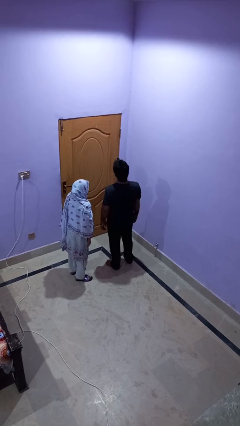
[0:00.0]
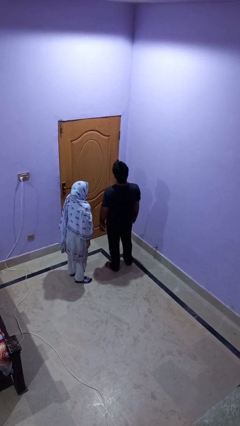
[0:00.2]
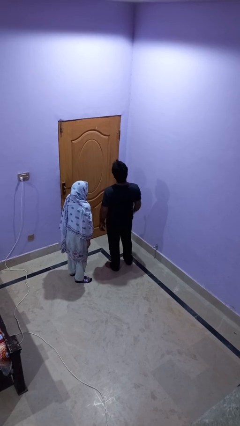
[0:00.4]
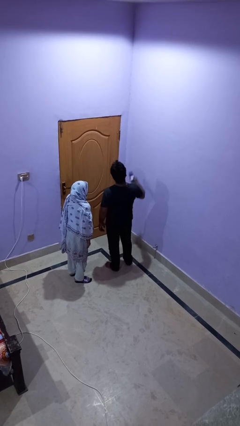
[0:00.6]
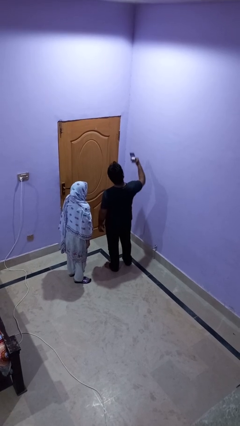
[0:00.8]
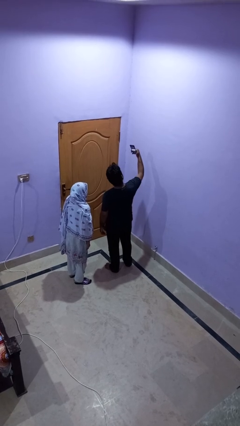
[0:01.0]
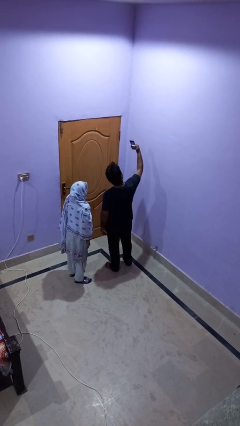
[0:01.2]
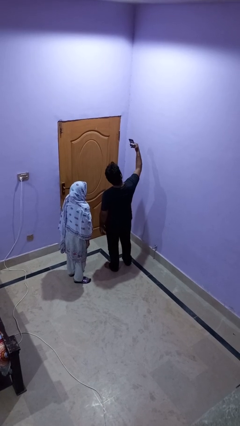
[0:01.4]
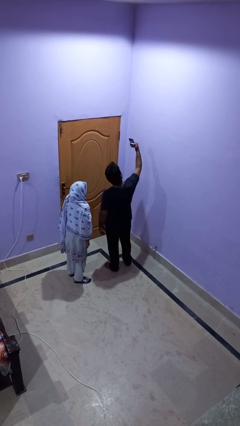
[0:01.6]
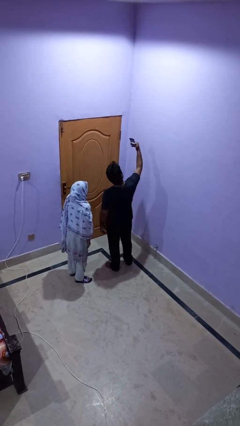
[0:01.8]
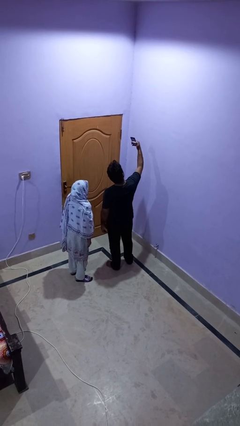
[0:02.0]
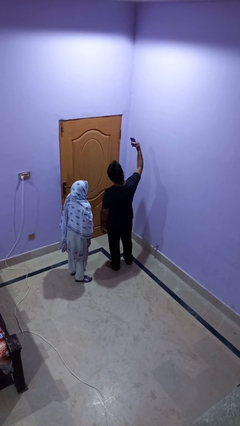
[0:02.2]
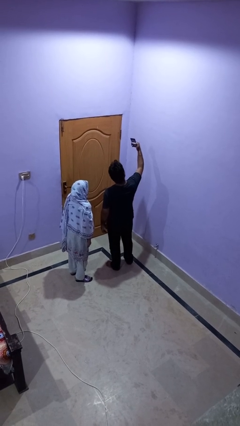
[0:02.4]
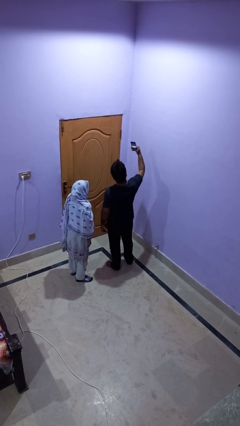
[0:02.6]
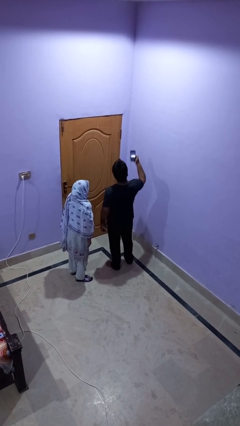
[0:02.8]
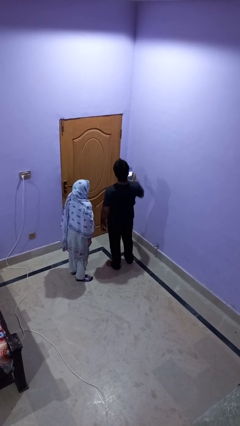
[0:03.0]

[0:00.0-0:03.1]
person takes selfie with person

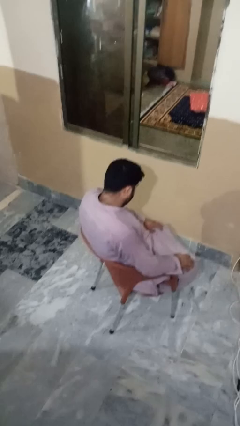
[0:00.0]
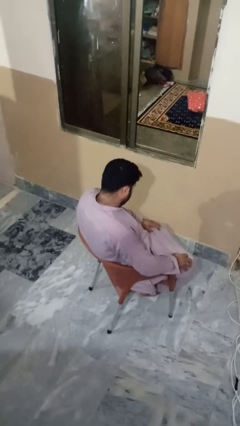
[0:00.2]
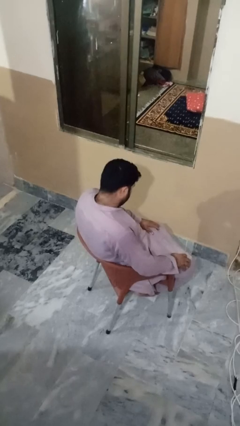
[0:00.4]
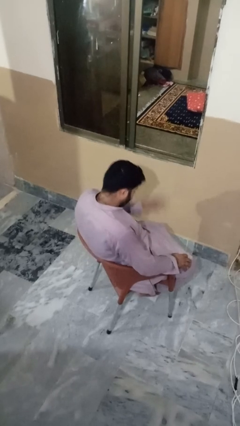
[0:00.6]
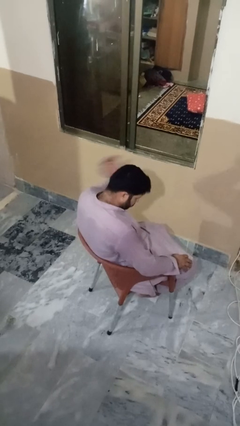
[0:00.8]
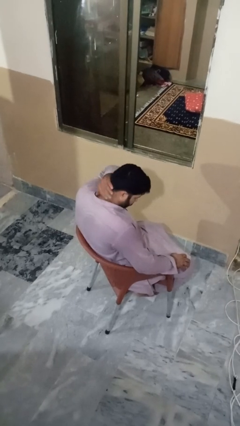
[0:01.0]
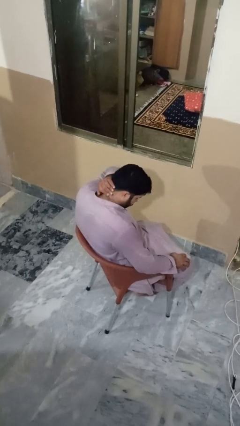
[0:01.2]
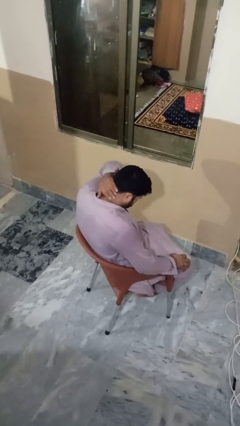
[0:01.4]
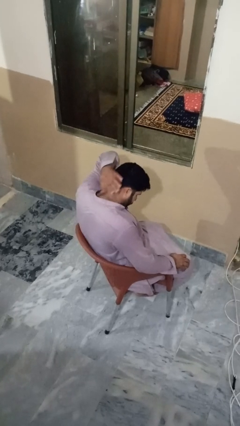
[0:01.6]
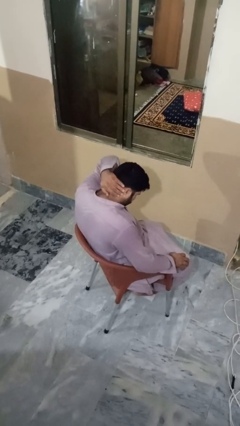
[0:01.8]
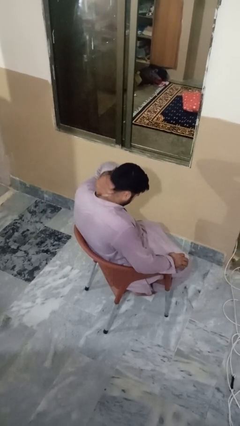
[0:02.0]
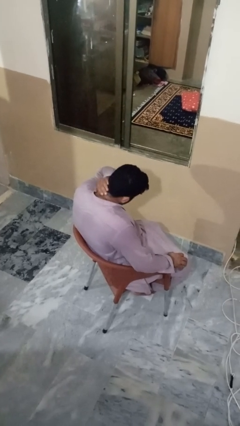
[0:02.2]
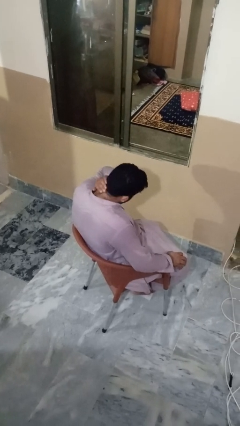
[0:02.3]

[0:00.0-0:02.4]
person rubs neck

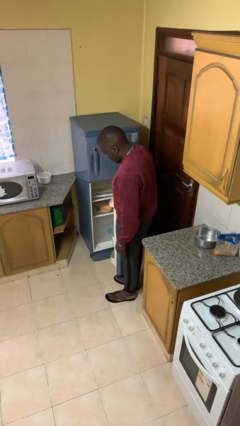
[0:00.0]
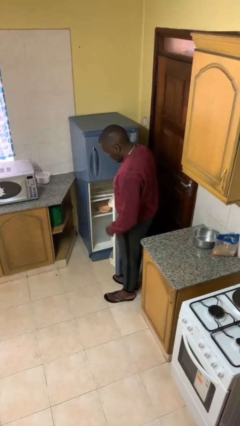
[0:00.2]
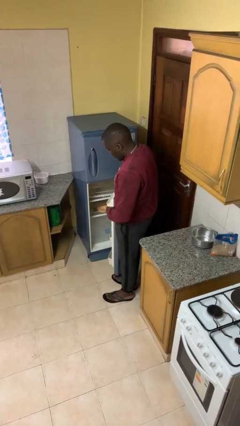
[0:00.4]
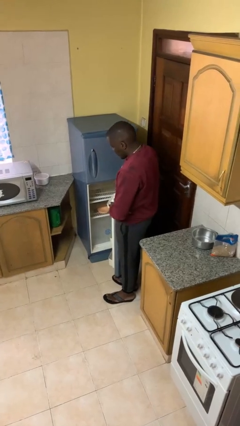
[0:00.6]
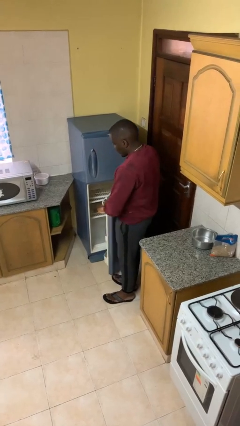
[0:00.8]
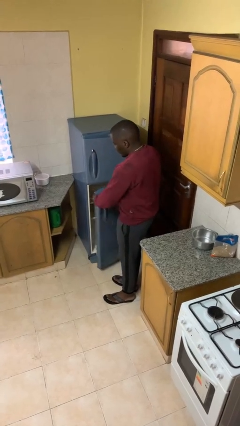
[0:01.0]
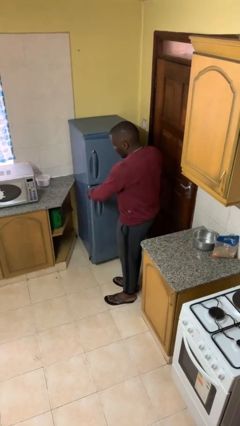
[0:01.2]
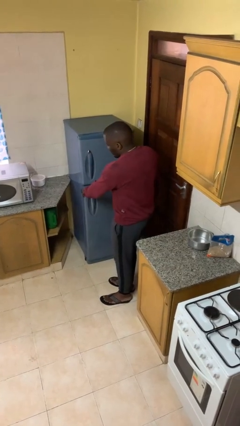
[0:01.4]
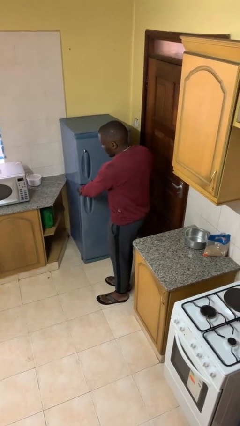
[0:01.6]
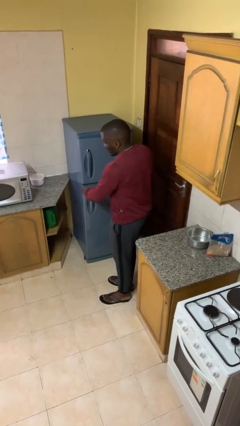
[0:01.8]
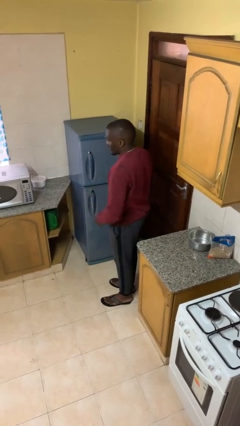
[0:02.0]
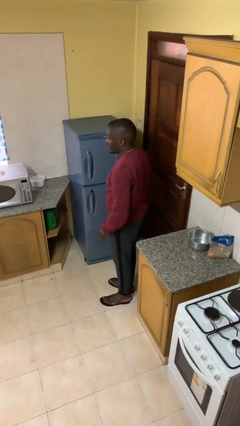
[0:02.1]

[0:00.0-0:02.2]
person closes refrigerator

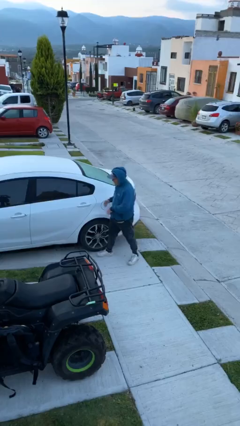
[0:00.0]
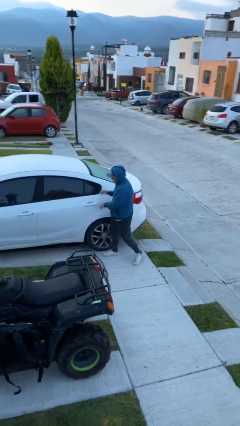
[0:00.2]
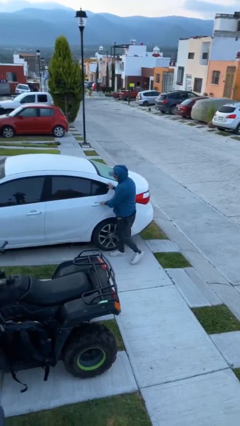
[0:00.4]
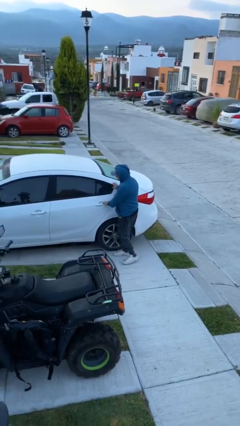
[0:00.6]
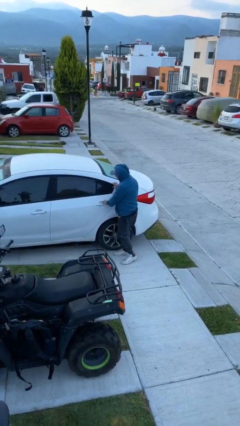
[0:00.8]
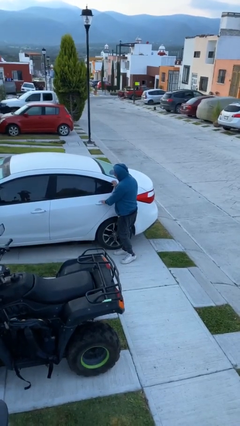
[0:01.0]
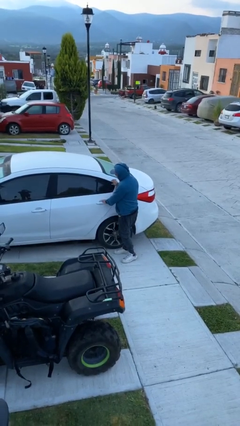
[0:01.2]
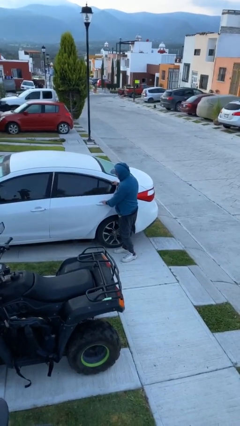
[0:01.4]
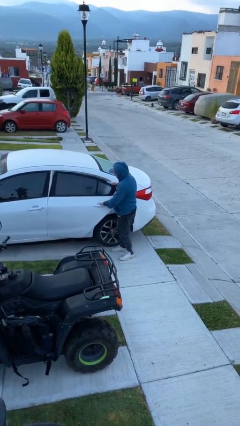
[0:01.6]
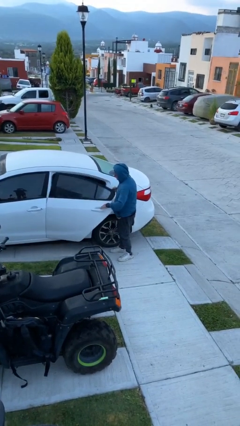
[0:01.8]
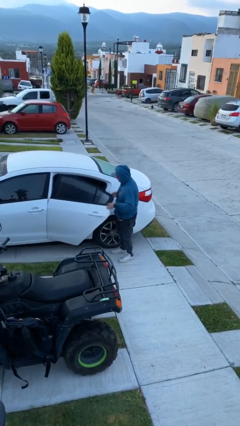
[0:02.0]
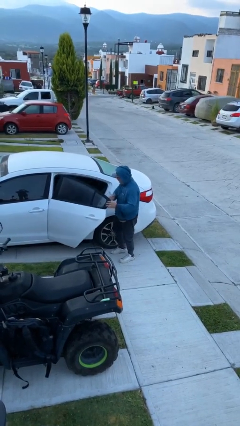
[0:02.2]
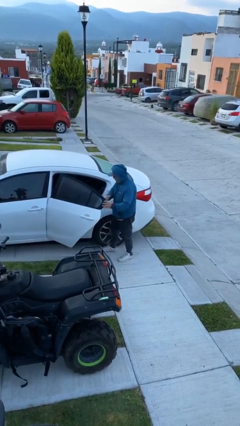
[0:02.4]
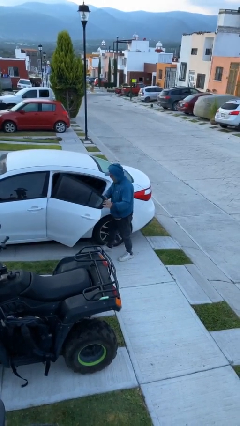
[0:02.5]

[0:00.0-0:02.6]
person opens car door

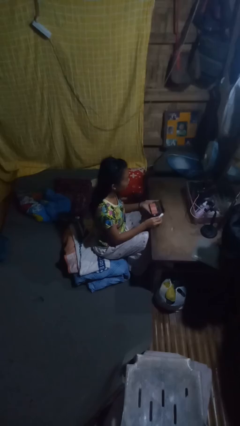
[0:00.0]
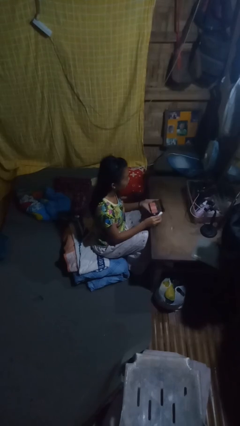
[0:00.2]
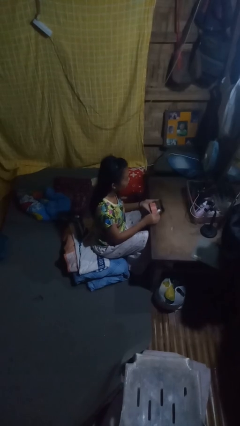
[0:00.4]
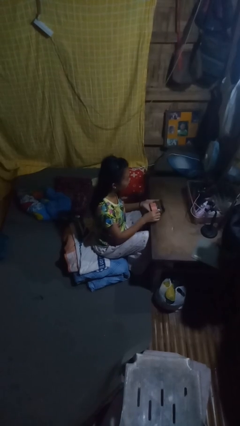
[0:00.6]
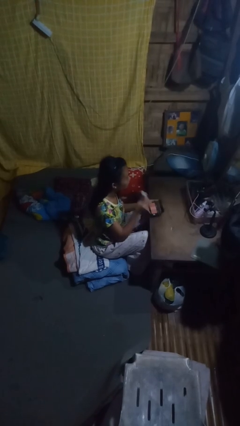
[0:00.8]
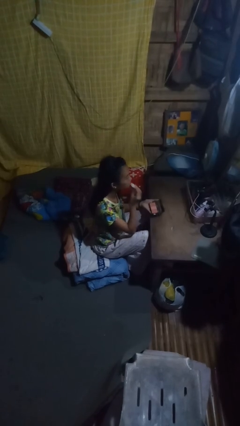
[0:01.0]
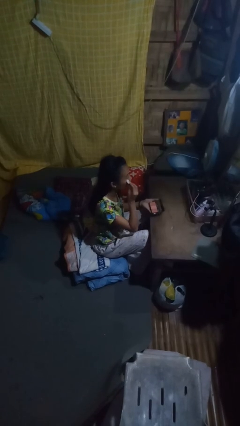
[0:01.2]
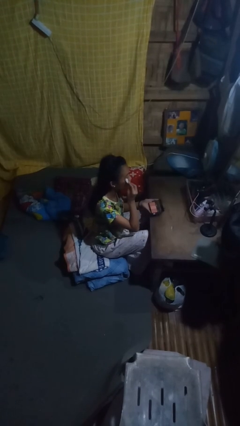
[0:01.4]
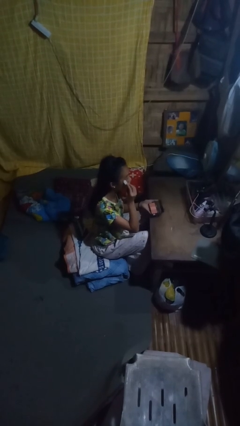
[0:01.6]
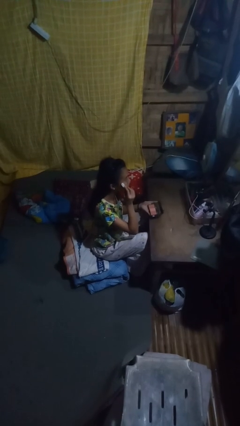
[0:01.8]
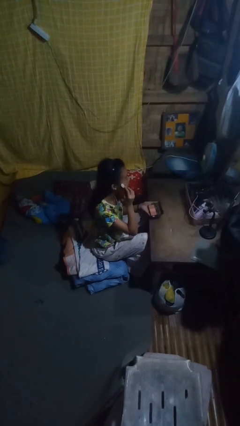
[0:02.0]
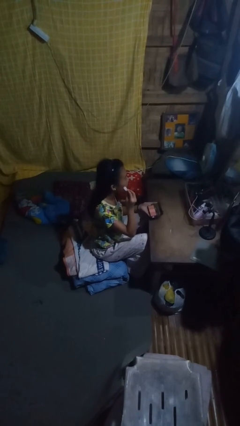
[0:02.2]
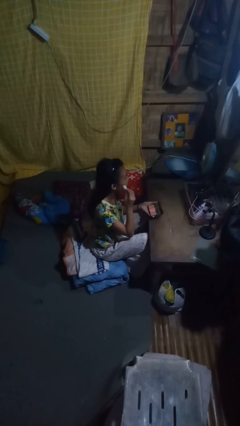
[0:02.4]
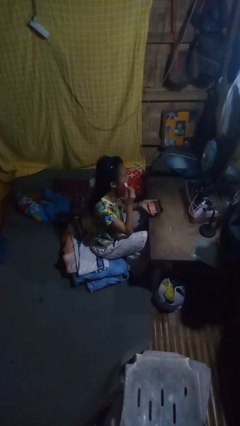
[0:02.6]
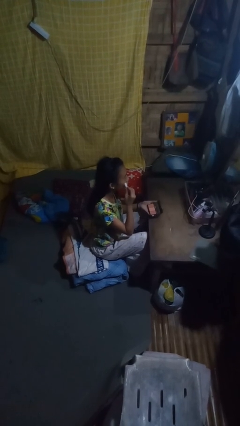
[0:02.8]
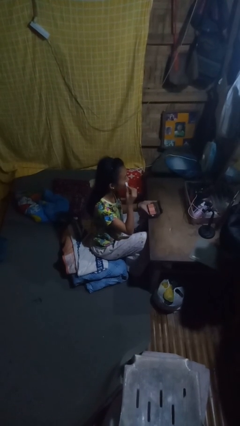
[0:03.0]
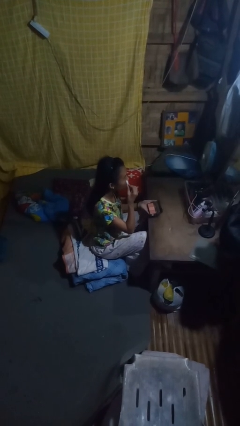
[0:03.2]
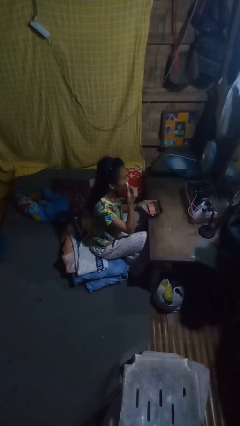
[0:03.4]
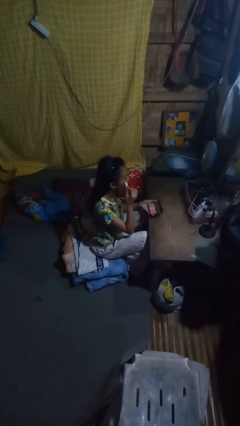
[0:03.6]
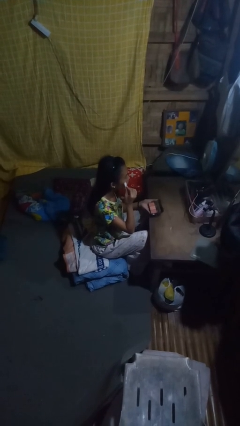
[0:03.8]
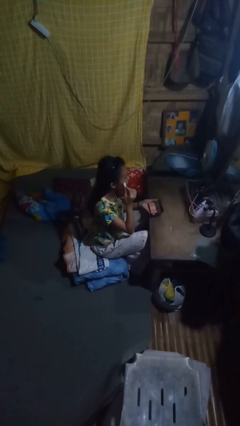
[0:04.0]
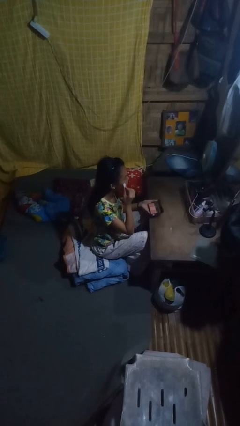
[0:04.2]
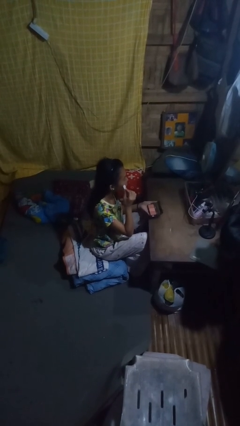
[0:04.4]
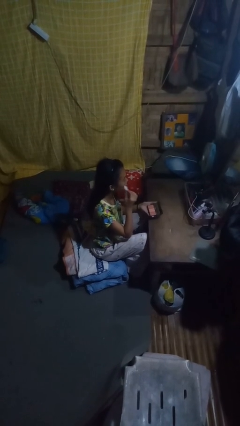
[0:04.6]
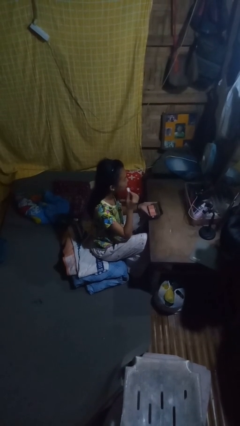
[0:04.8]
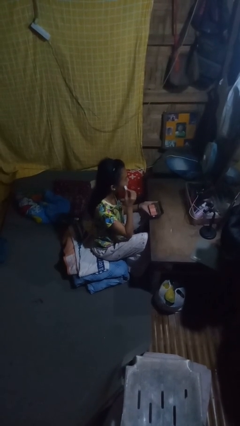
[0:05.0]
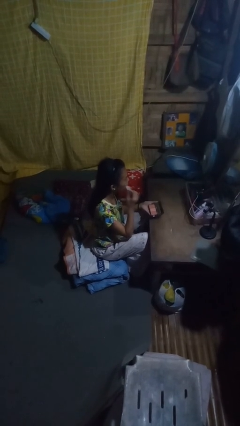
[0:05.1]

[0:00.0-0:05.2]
person applies foundation makeup

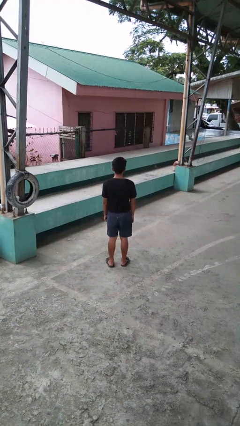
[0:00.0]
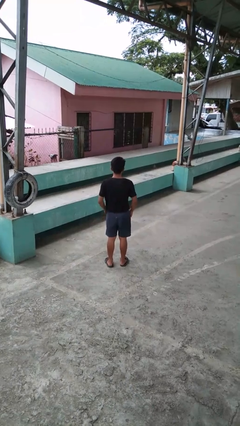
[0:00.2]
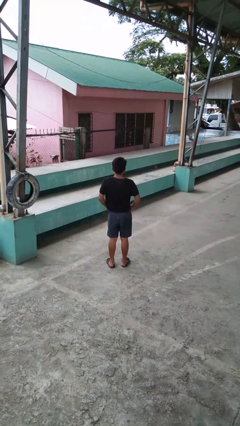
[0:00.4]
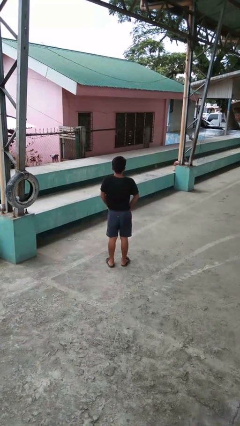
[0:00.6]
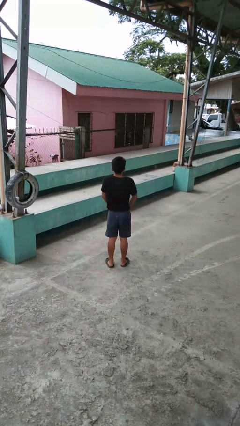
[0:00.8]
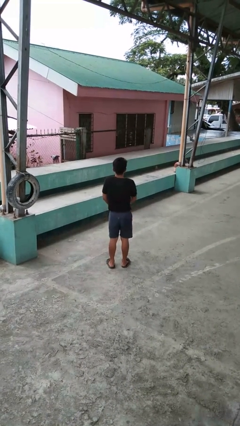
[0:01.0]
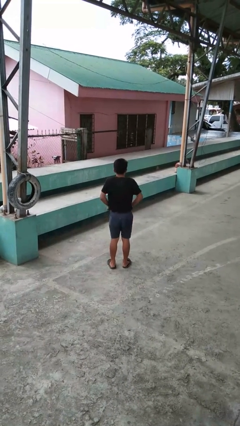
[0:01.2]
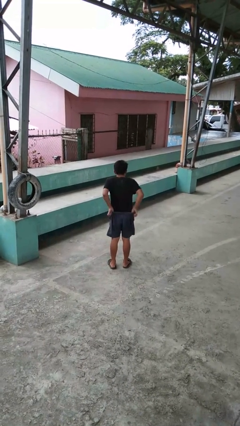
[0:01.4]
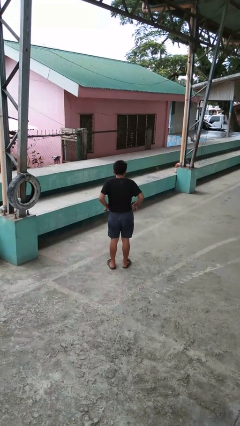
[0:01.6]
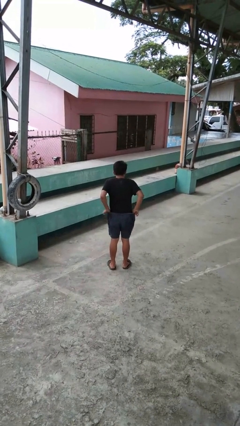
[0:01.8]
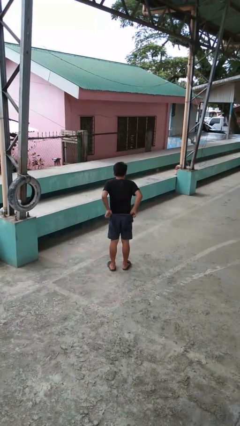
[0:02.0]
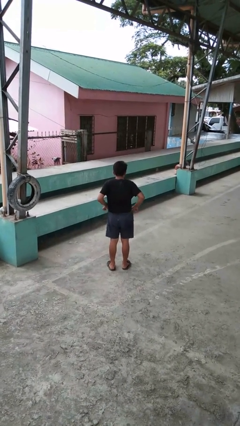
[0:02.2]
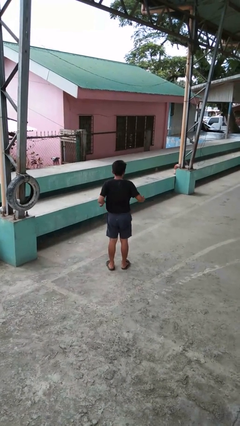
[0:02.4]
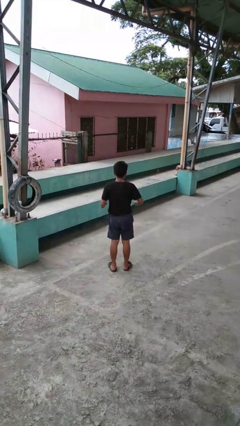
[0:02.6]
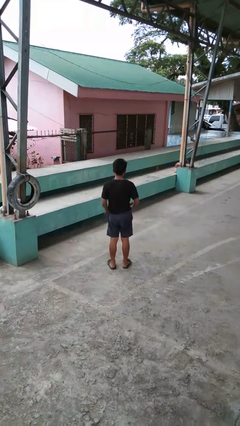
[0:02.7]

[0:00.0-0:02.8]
person hikes up pants
